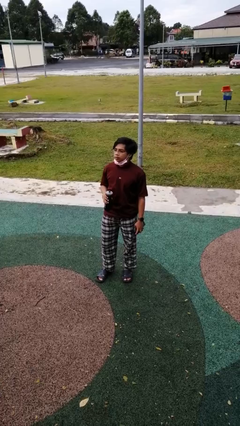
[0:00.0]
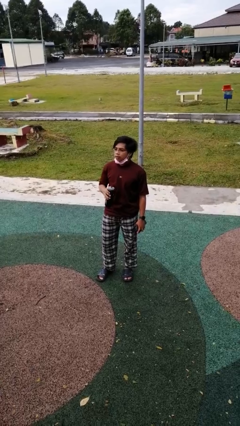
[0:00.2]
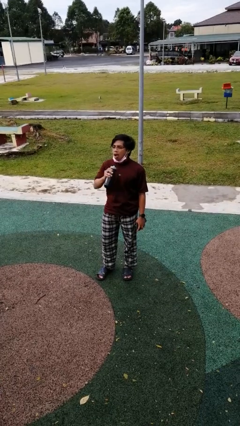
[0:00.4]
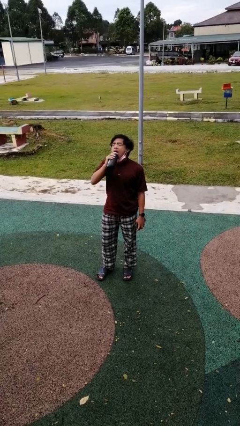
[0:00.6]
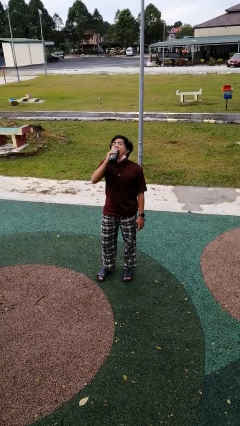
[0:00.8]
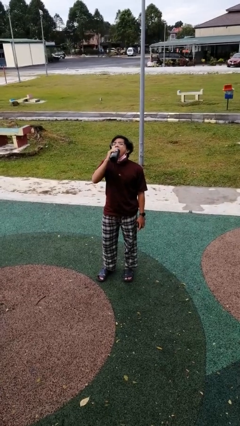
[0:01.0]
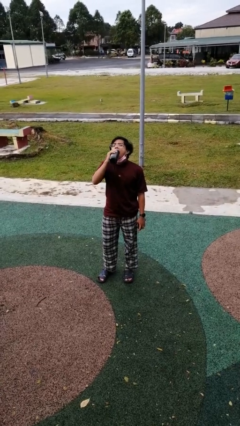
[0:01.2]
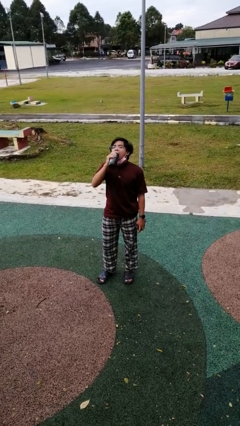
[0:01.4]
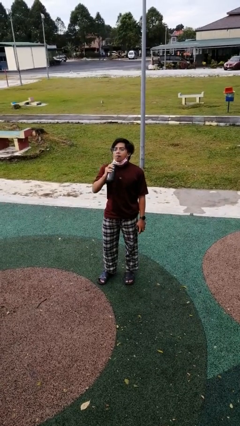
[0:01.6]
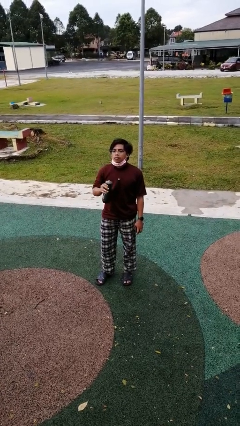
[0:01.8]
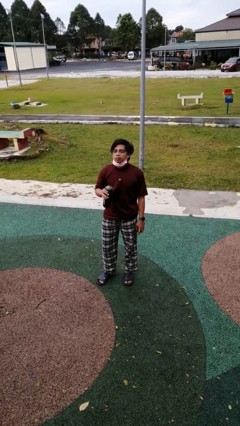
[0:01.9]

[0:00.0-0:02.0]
person drinks from bottle

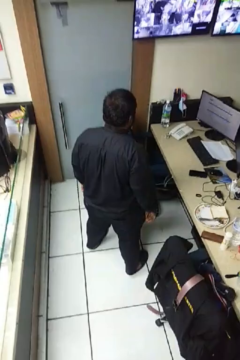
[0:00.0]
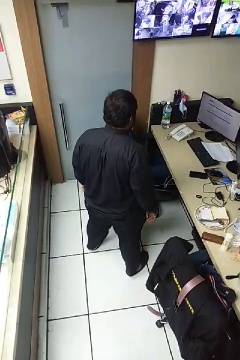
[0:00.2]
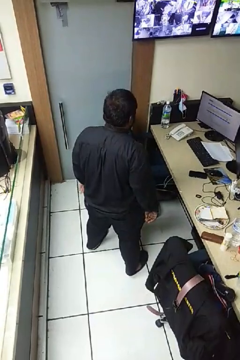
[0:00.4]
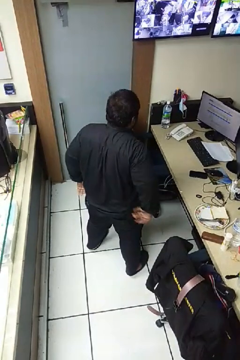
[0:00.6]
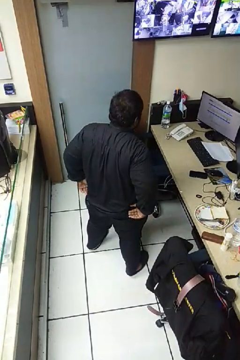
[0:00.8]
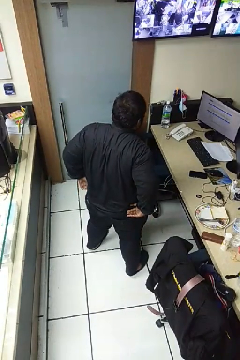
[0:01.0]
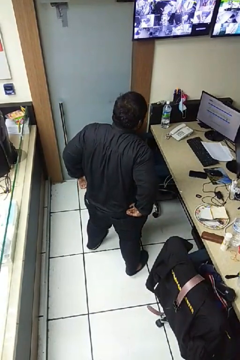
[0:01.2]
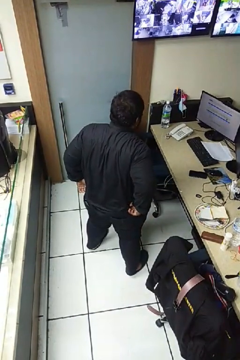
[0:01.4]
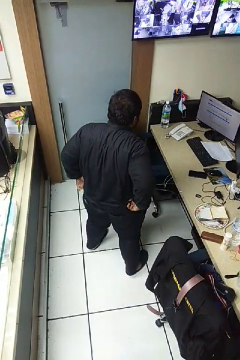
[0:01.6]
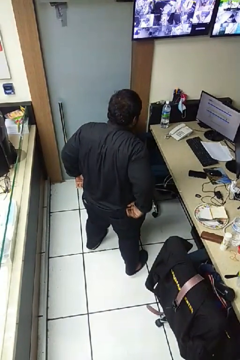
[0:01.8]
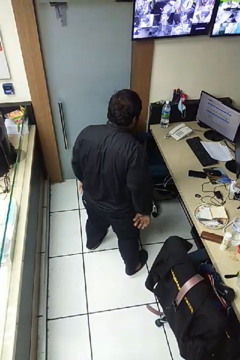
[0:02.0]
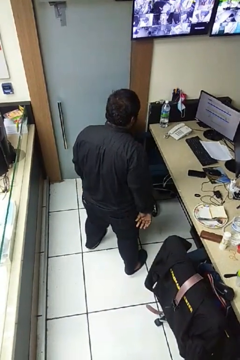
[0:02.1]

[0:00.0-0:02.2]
person hikes up pants

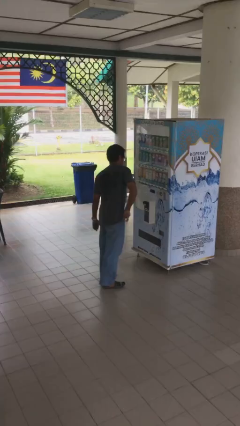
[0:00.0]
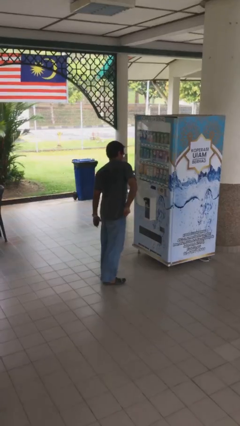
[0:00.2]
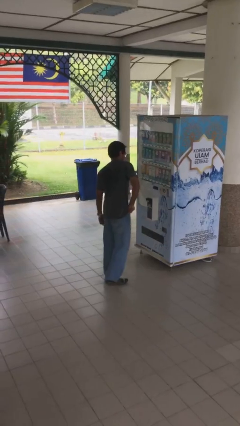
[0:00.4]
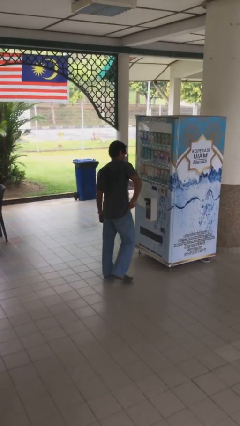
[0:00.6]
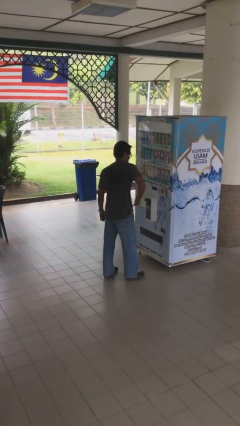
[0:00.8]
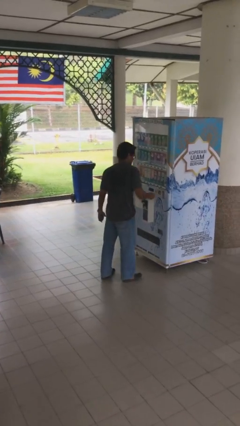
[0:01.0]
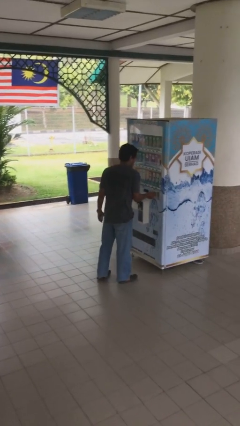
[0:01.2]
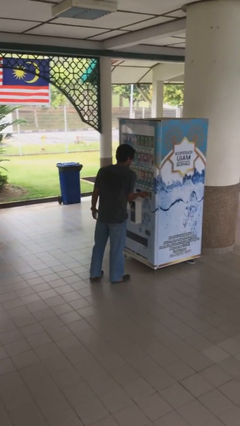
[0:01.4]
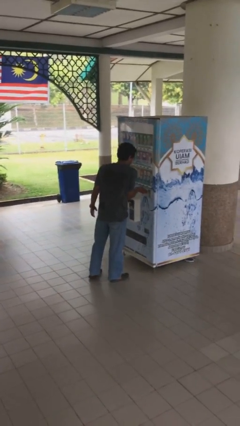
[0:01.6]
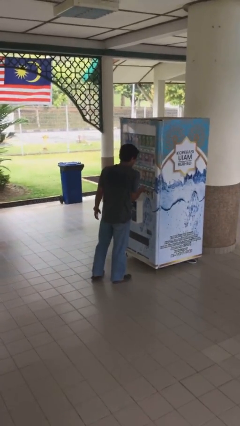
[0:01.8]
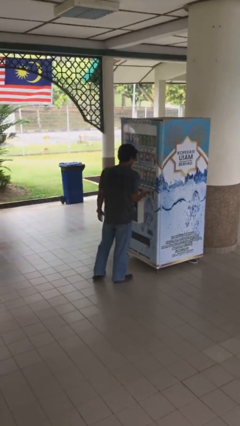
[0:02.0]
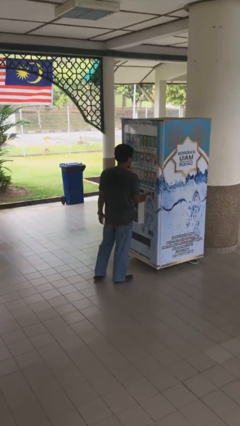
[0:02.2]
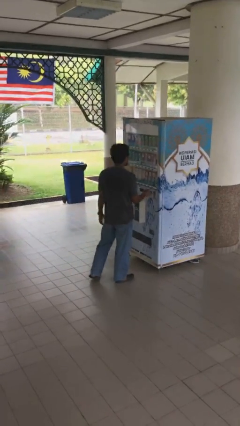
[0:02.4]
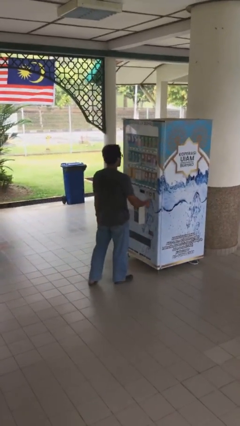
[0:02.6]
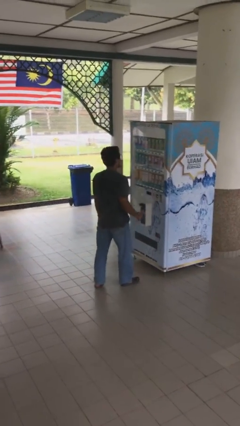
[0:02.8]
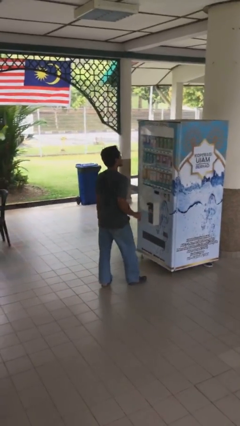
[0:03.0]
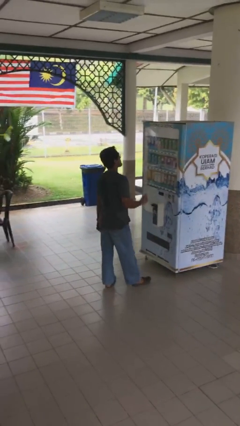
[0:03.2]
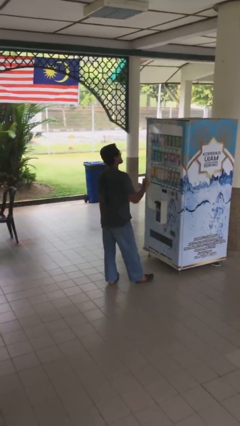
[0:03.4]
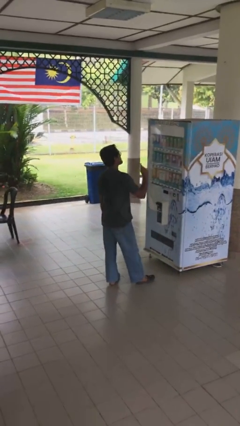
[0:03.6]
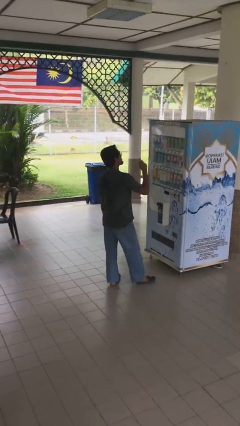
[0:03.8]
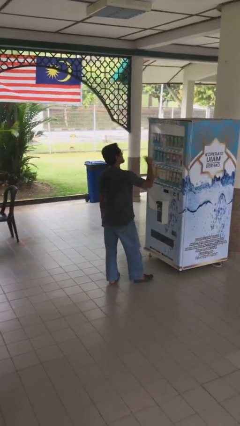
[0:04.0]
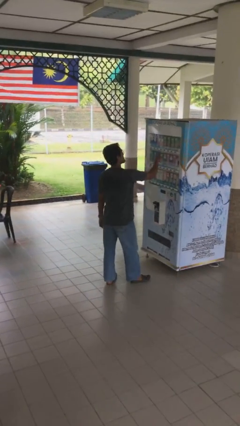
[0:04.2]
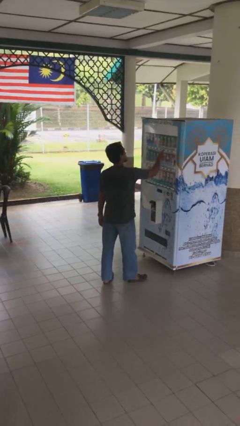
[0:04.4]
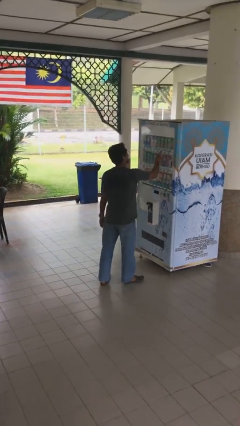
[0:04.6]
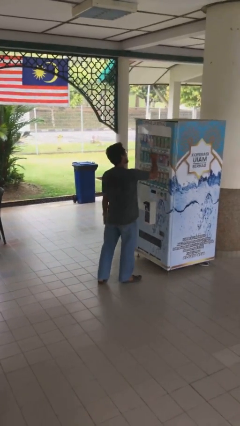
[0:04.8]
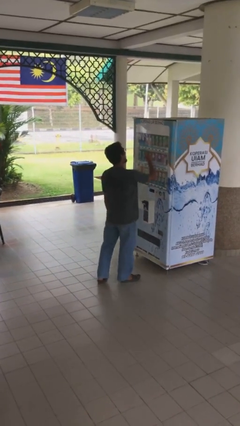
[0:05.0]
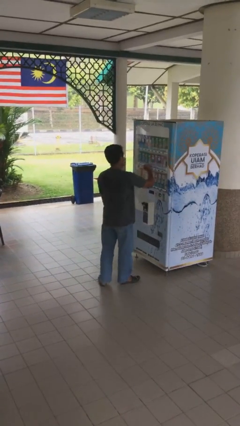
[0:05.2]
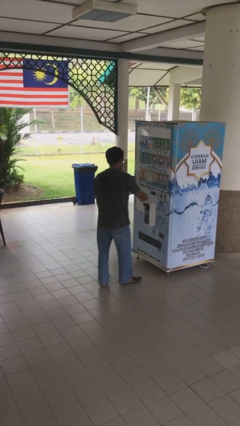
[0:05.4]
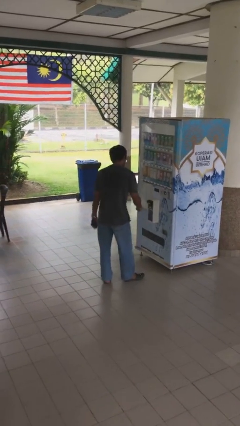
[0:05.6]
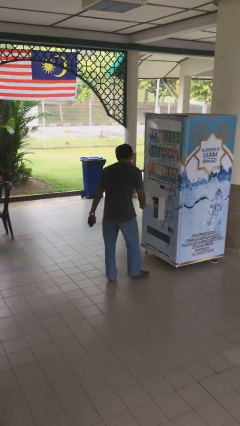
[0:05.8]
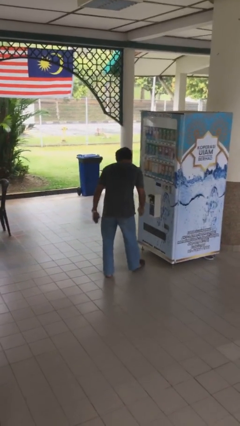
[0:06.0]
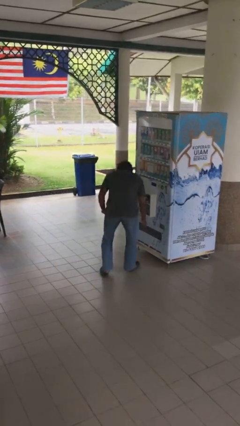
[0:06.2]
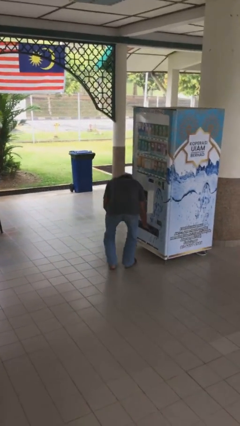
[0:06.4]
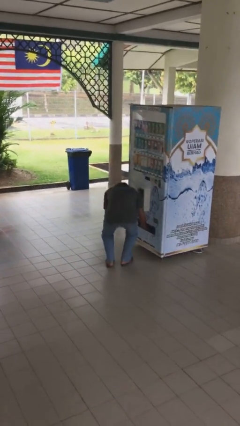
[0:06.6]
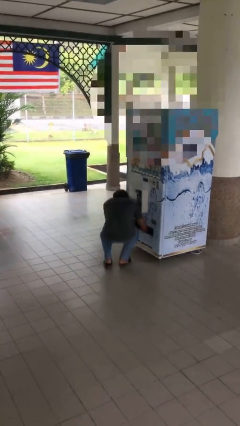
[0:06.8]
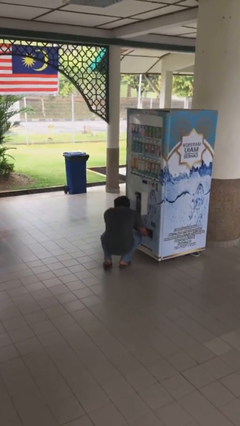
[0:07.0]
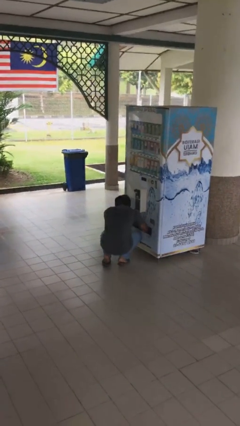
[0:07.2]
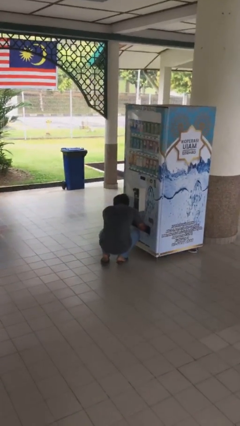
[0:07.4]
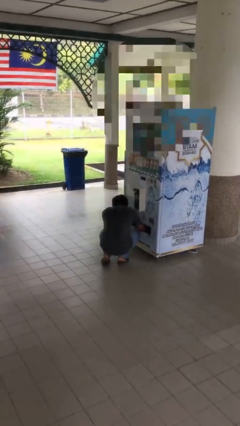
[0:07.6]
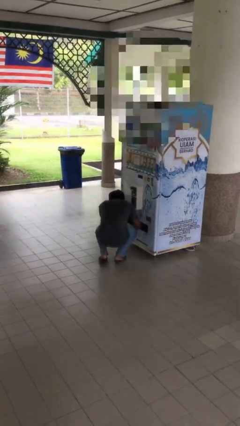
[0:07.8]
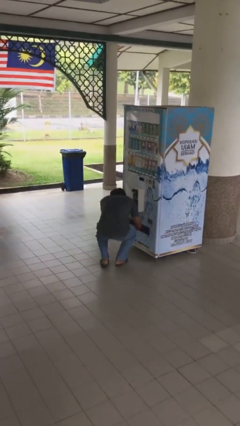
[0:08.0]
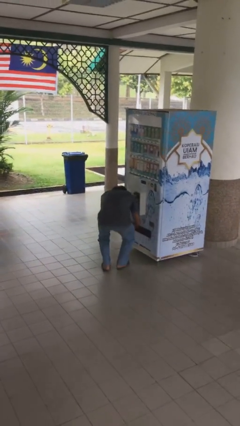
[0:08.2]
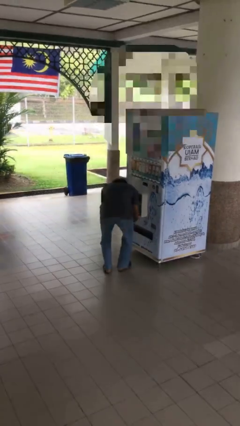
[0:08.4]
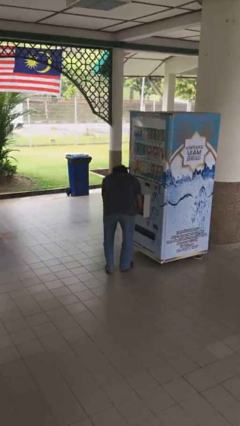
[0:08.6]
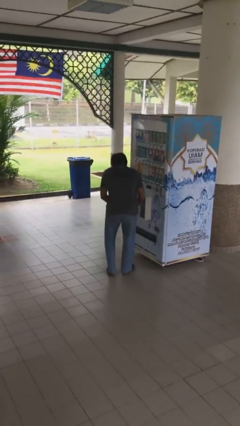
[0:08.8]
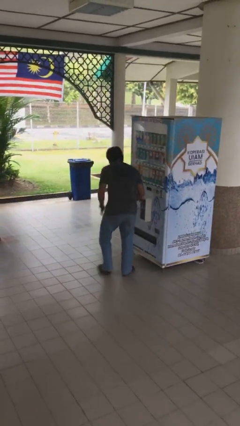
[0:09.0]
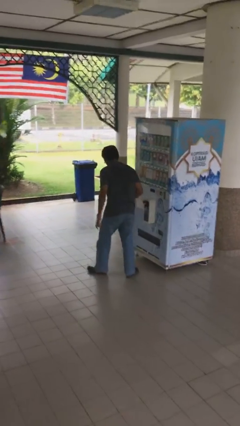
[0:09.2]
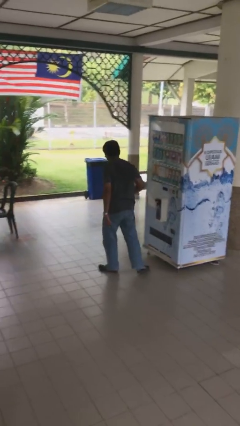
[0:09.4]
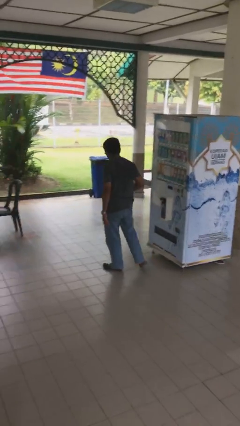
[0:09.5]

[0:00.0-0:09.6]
person purchases from machine

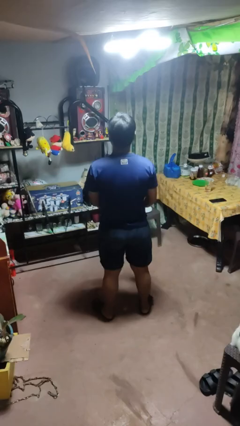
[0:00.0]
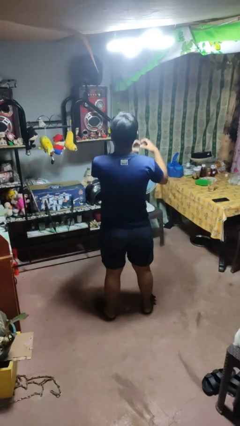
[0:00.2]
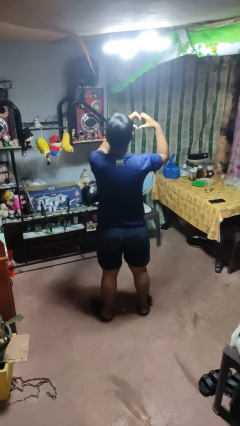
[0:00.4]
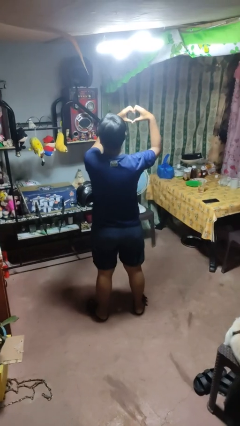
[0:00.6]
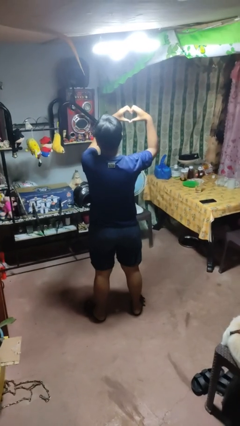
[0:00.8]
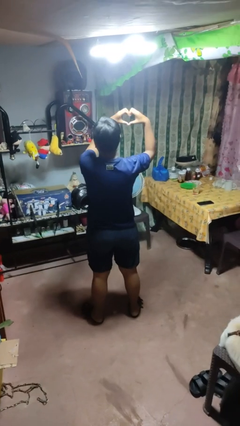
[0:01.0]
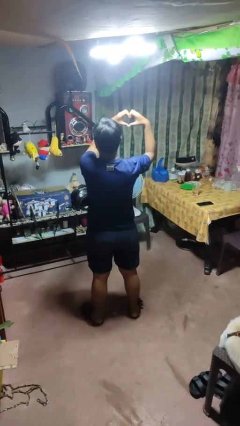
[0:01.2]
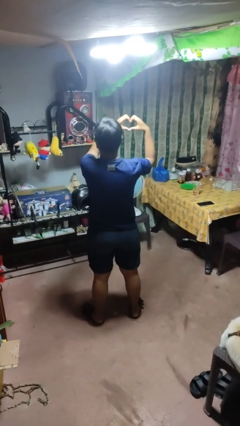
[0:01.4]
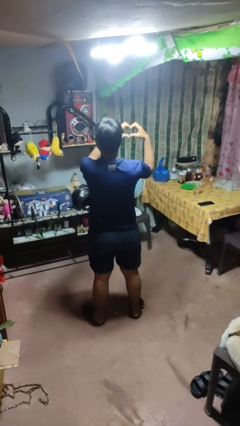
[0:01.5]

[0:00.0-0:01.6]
person gestures heart

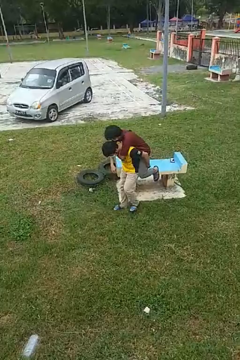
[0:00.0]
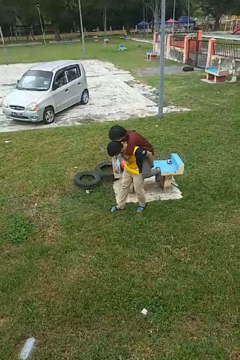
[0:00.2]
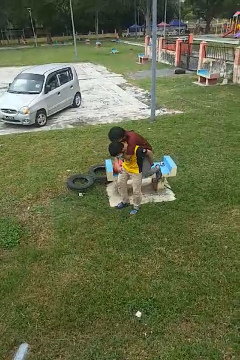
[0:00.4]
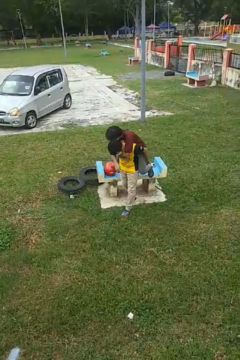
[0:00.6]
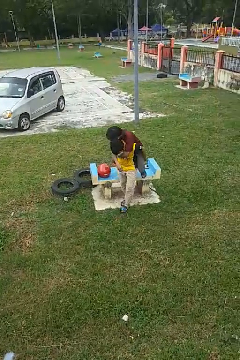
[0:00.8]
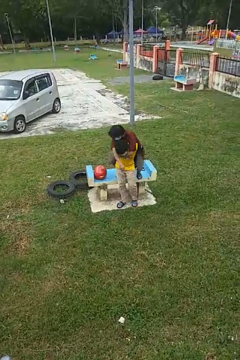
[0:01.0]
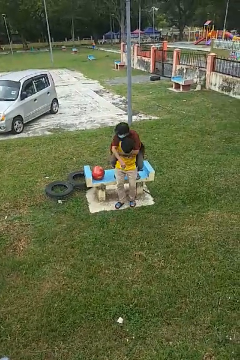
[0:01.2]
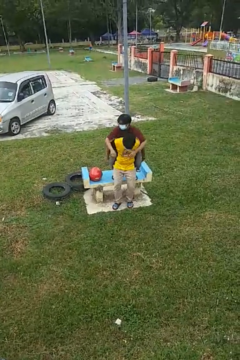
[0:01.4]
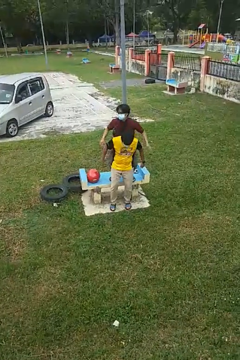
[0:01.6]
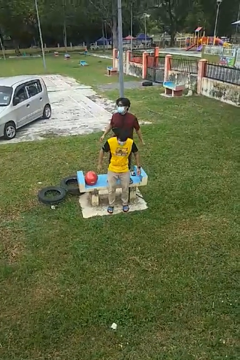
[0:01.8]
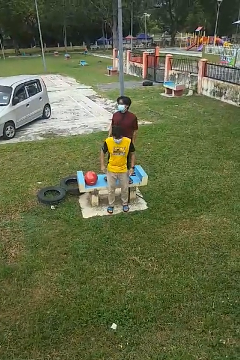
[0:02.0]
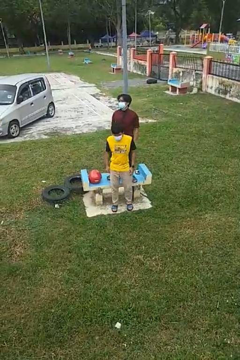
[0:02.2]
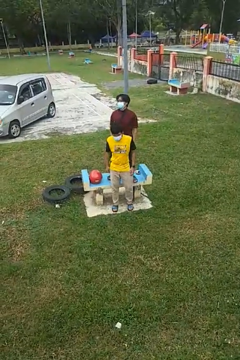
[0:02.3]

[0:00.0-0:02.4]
person puts down person

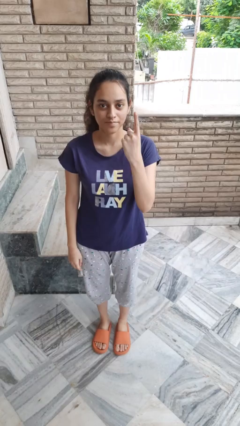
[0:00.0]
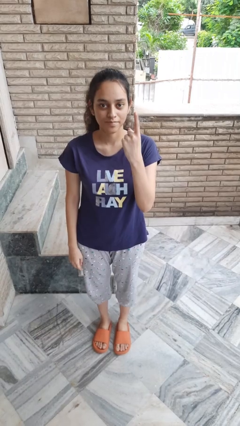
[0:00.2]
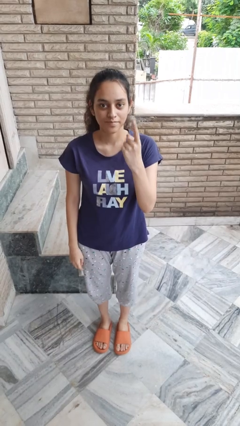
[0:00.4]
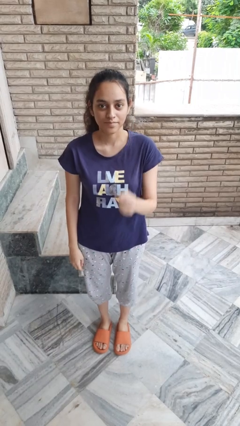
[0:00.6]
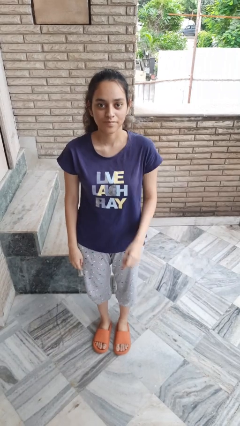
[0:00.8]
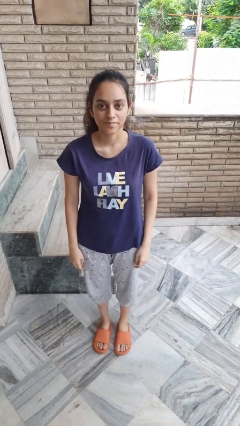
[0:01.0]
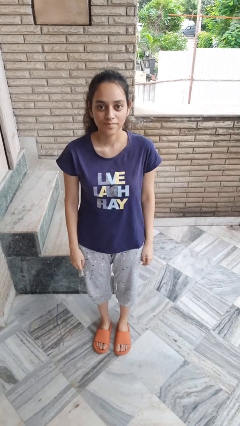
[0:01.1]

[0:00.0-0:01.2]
person gestures number one
